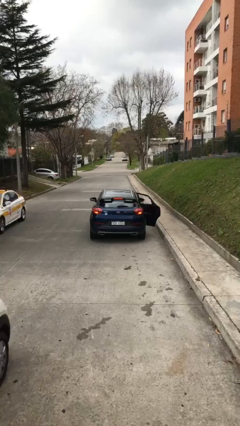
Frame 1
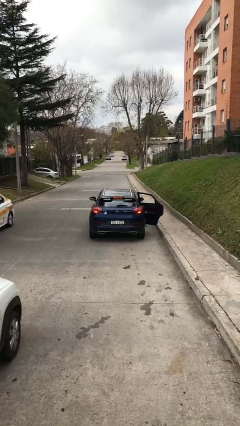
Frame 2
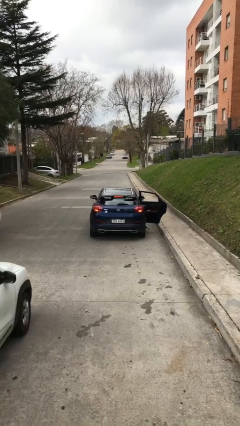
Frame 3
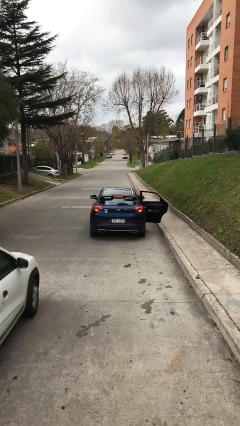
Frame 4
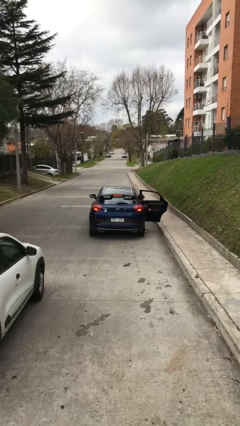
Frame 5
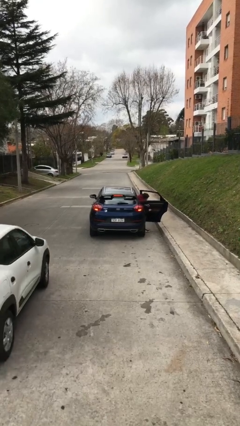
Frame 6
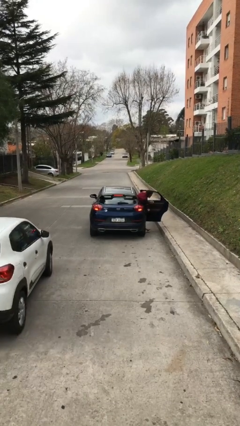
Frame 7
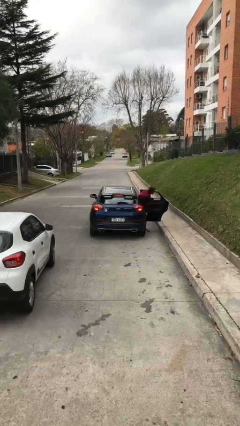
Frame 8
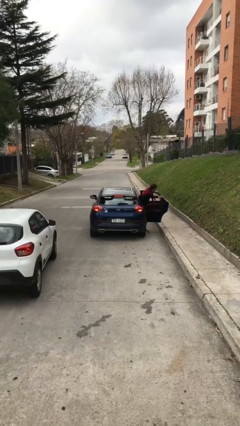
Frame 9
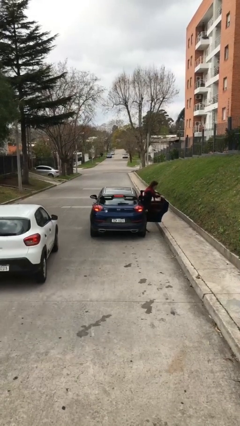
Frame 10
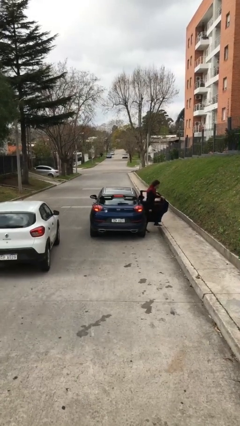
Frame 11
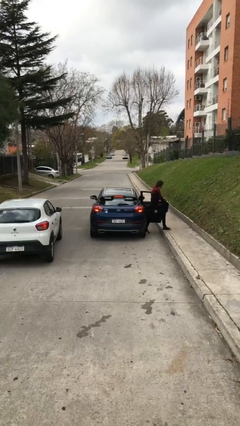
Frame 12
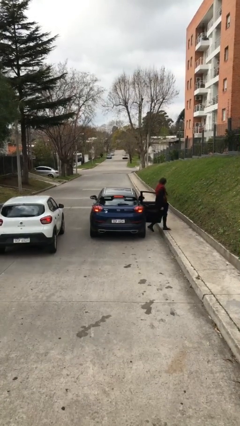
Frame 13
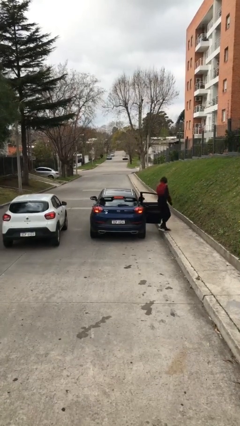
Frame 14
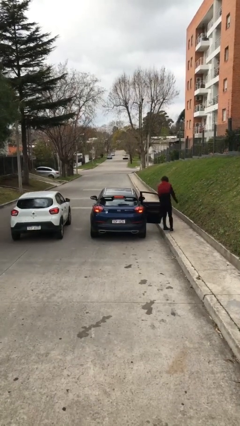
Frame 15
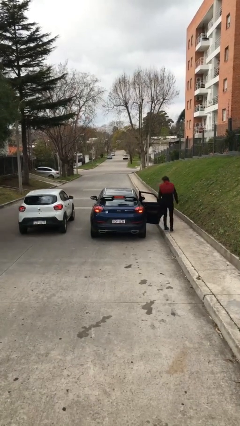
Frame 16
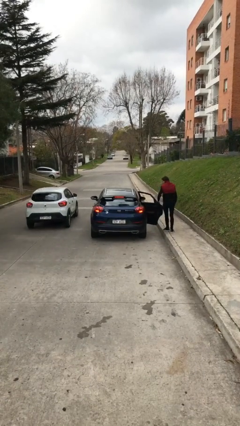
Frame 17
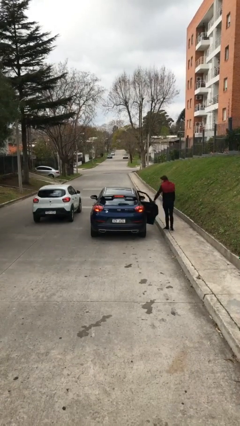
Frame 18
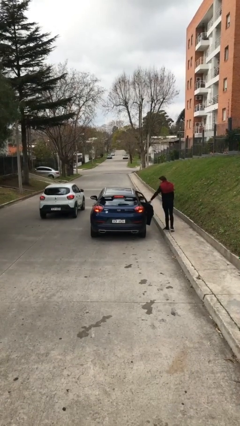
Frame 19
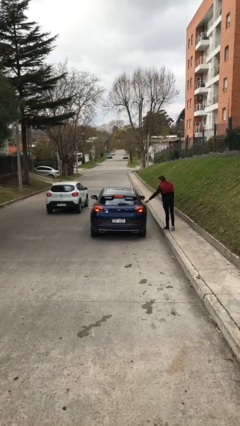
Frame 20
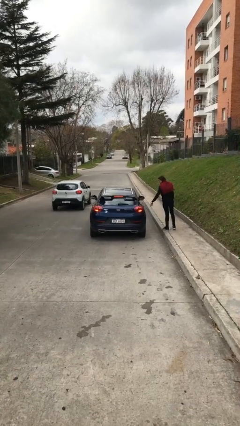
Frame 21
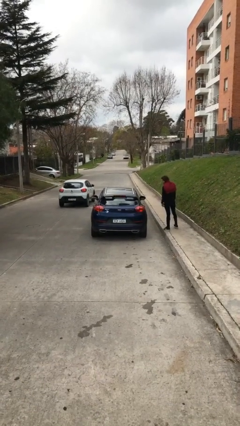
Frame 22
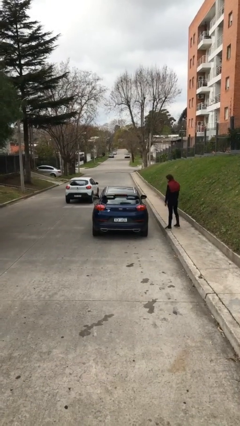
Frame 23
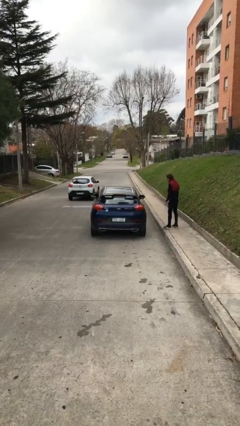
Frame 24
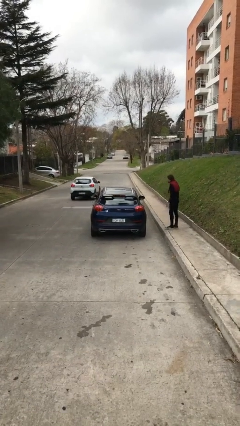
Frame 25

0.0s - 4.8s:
car drops off person

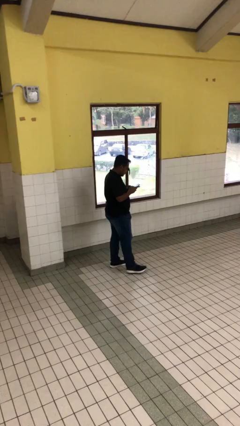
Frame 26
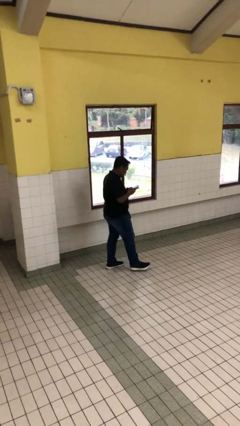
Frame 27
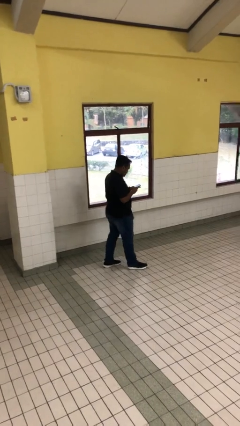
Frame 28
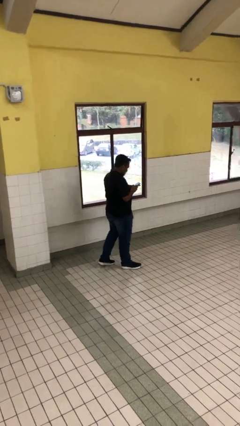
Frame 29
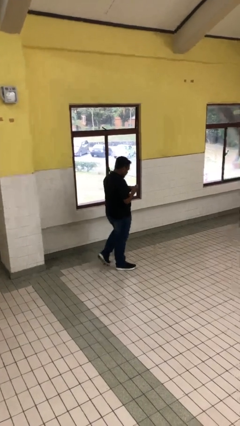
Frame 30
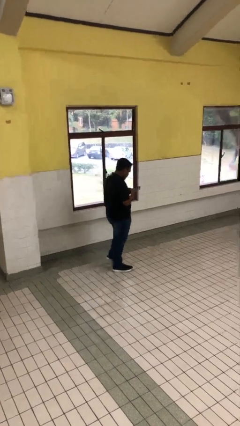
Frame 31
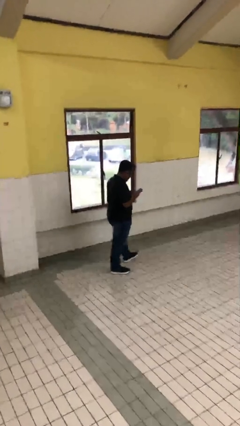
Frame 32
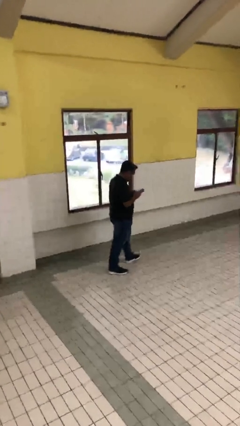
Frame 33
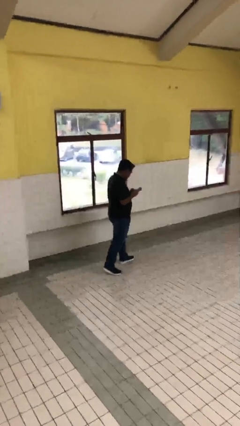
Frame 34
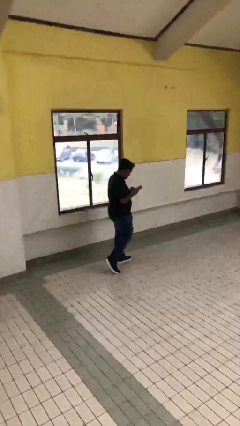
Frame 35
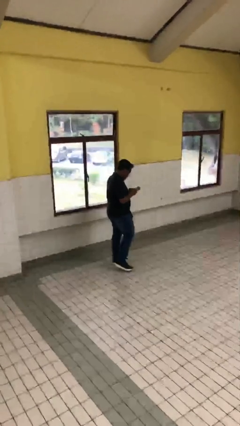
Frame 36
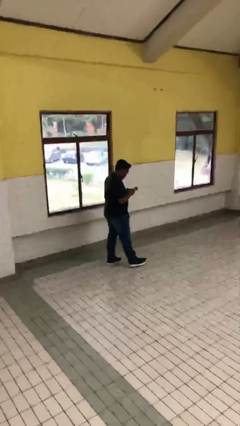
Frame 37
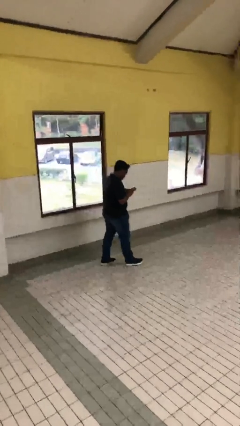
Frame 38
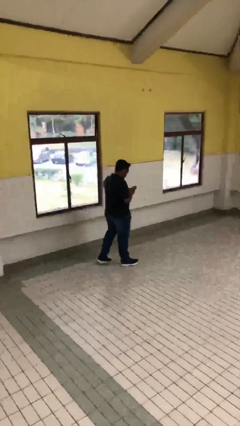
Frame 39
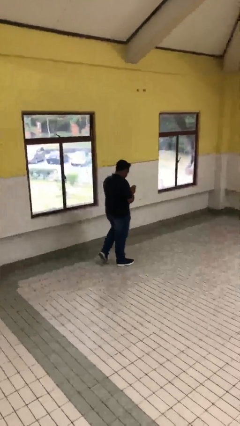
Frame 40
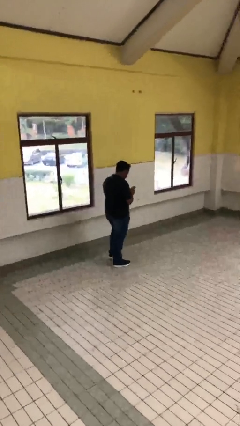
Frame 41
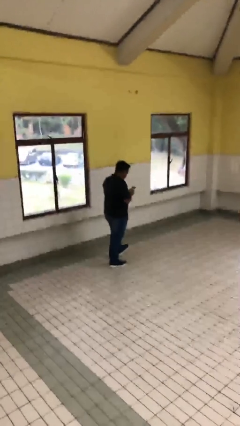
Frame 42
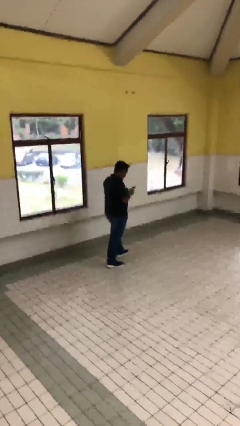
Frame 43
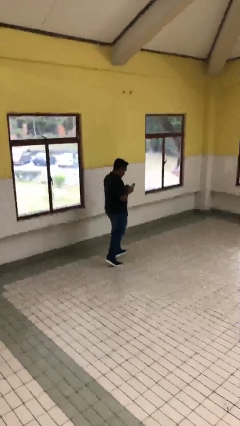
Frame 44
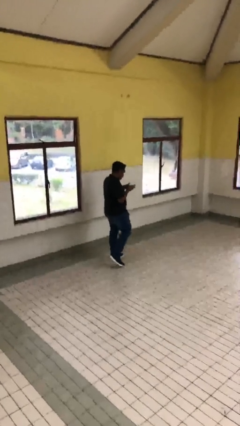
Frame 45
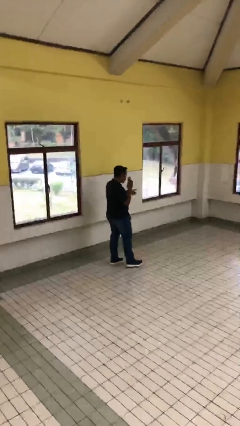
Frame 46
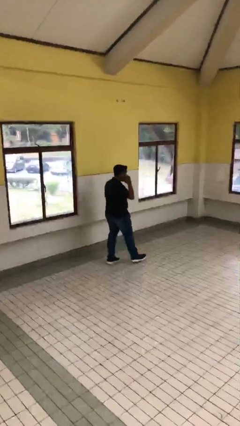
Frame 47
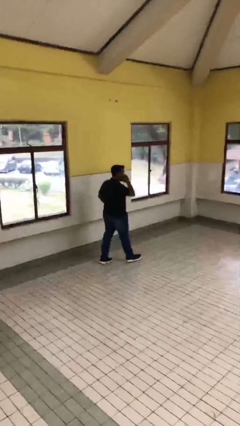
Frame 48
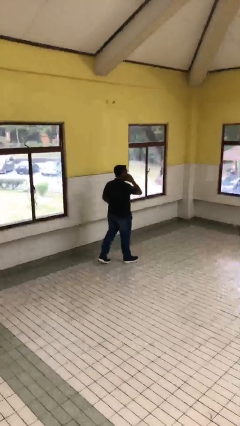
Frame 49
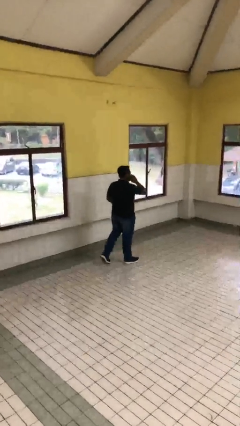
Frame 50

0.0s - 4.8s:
person texts on phone

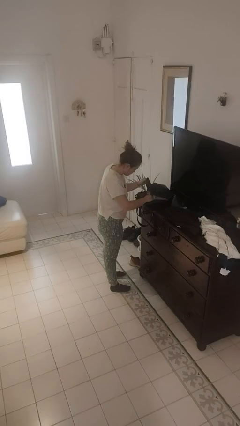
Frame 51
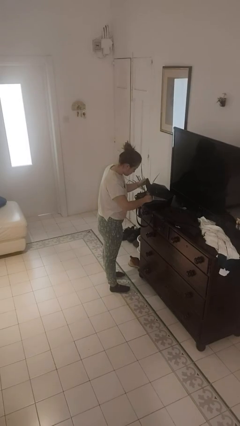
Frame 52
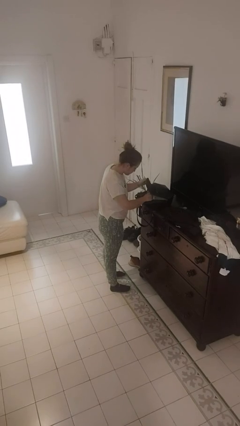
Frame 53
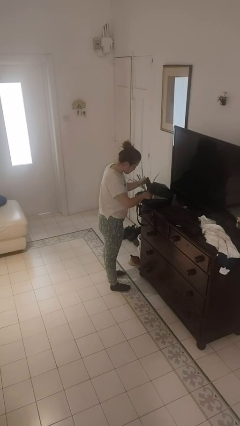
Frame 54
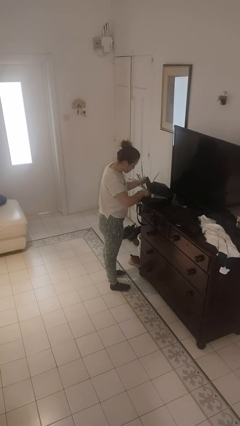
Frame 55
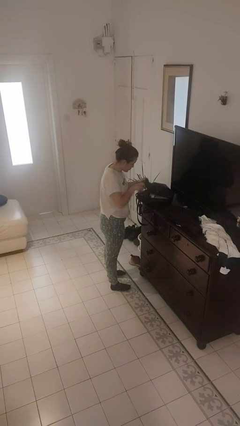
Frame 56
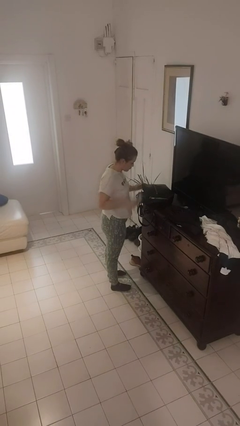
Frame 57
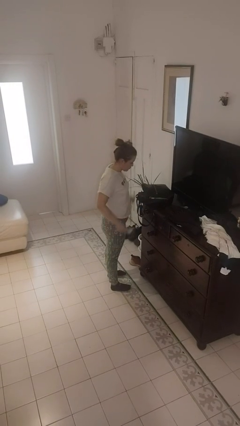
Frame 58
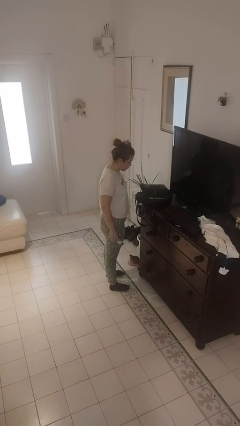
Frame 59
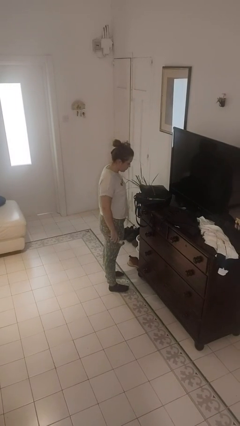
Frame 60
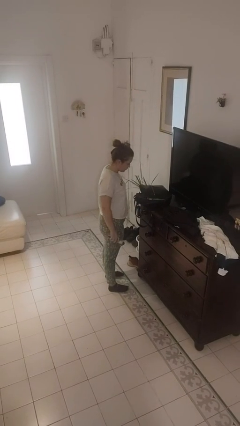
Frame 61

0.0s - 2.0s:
person takes object from purse

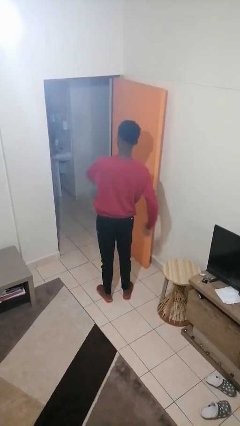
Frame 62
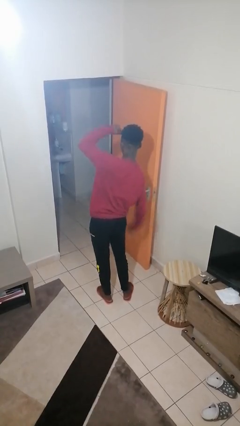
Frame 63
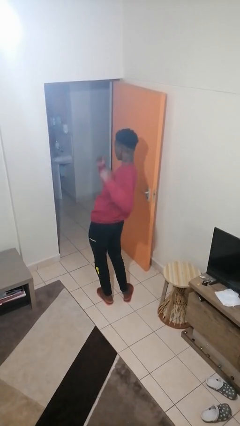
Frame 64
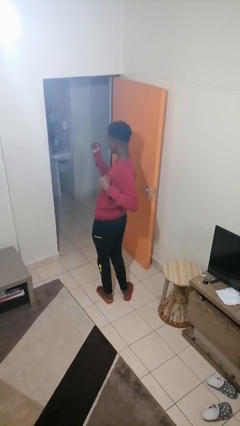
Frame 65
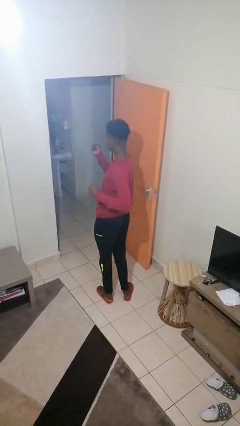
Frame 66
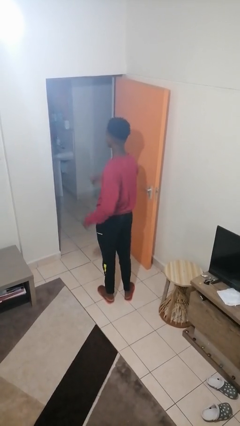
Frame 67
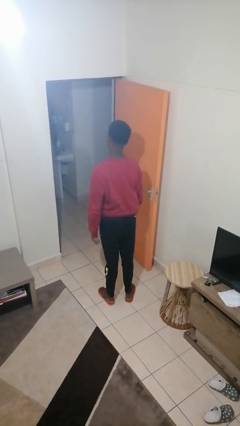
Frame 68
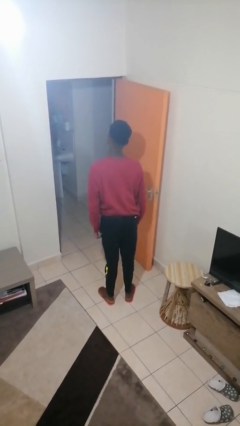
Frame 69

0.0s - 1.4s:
person punches

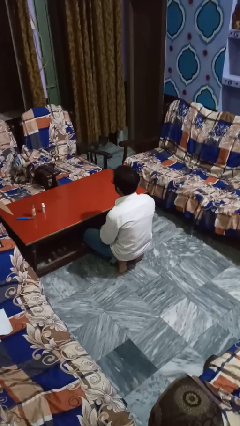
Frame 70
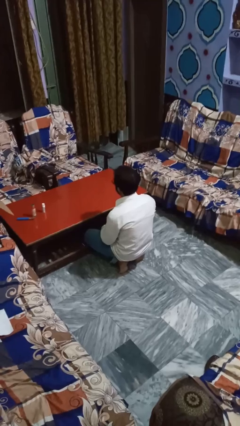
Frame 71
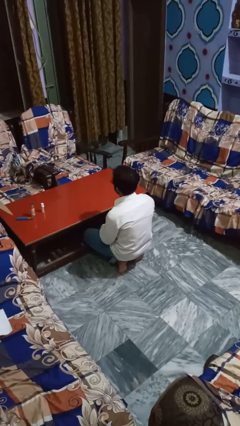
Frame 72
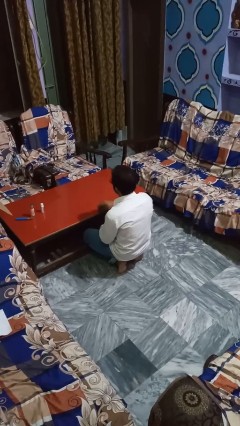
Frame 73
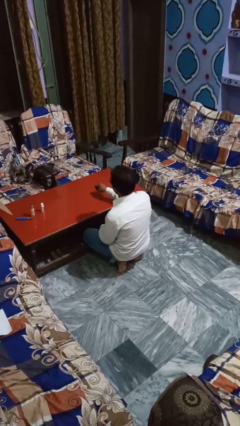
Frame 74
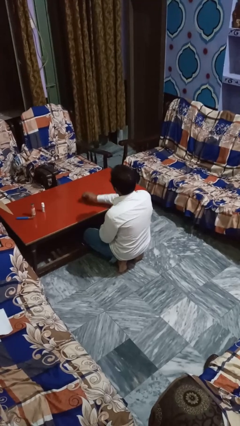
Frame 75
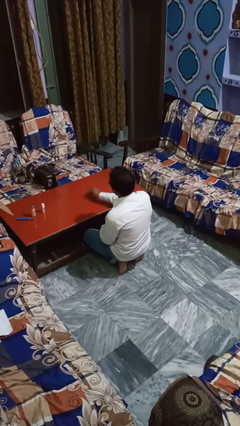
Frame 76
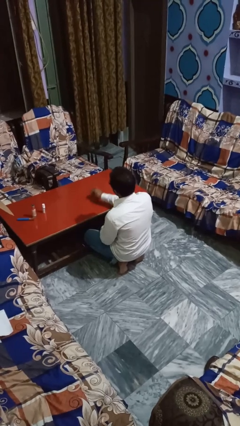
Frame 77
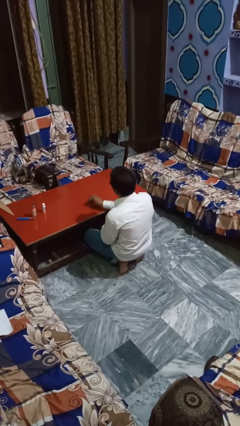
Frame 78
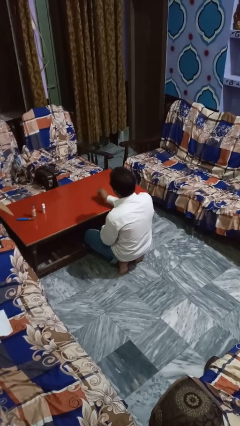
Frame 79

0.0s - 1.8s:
person cleans table with rag

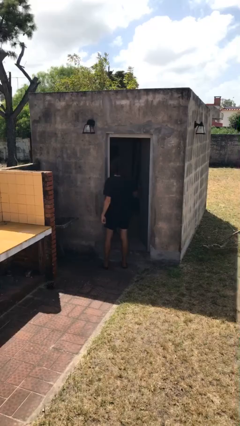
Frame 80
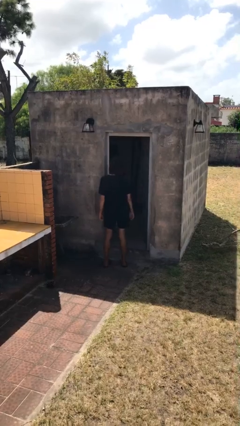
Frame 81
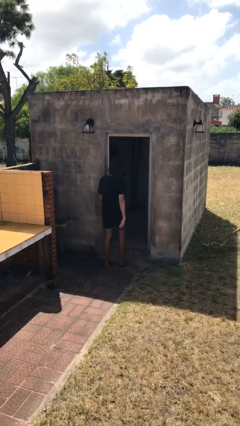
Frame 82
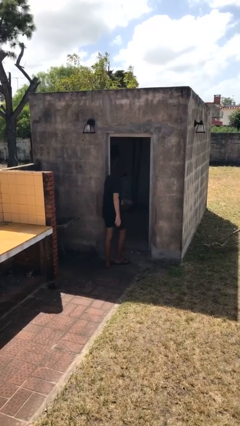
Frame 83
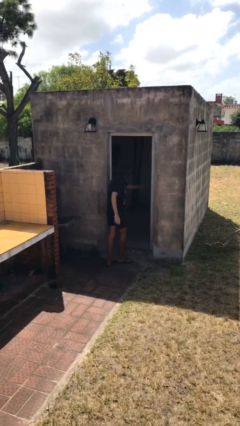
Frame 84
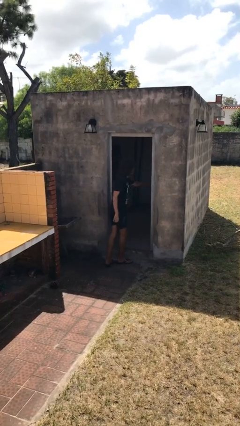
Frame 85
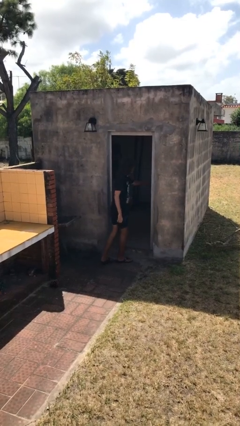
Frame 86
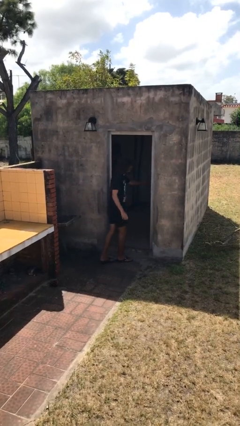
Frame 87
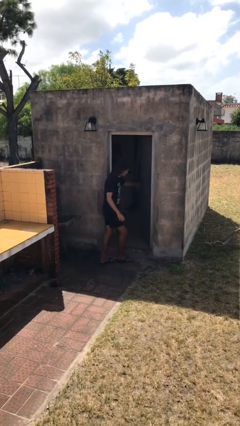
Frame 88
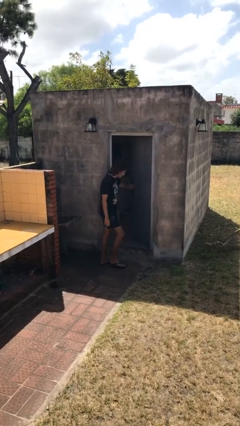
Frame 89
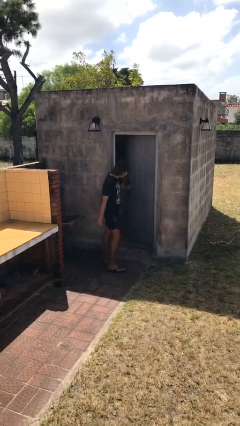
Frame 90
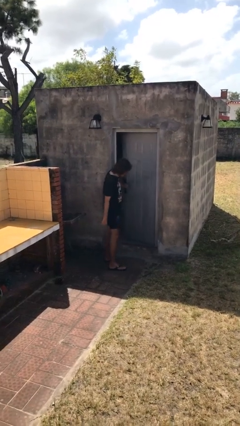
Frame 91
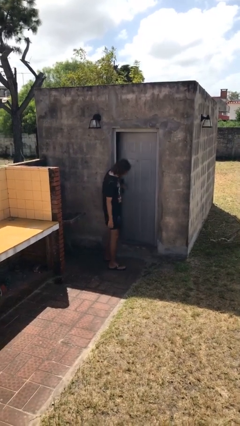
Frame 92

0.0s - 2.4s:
person closes facility door
